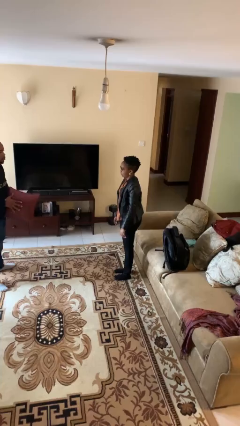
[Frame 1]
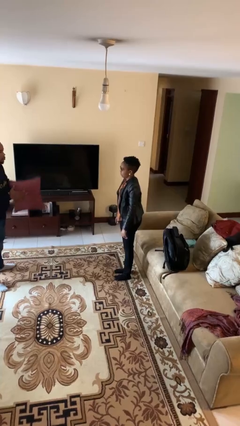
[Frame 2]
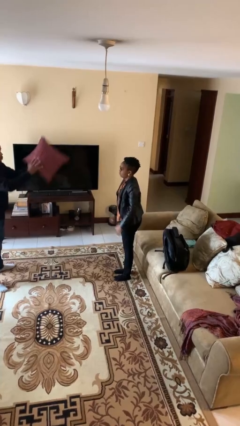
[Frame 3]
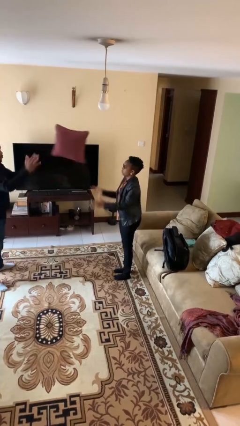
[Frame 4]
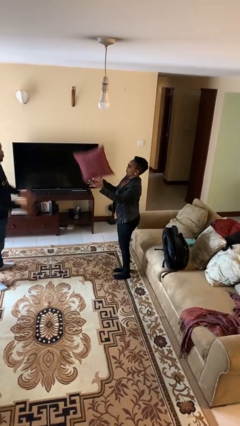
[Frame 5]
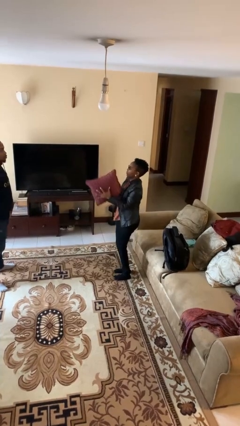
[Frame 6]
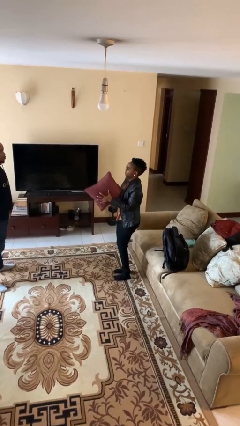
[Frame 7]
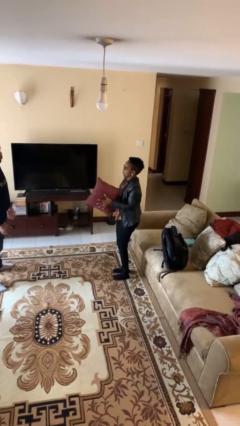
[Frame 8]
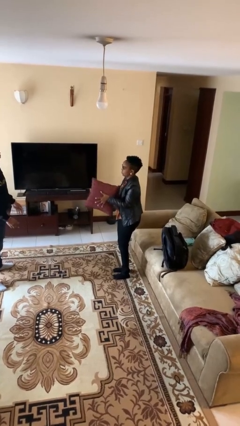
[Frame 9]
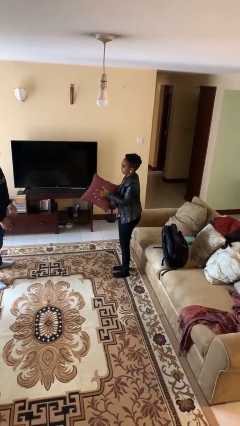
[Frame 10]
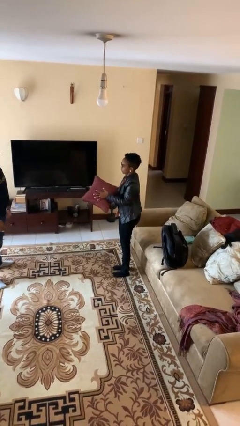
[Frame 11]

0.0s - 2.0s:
person catches object from person

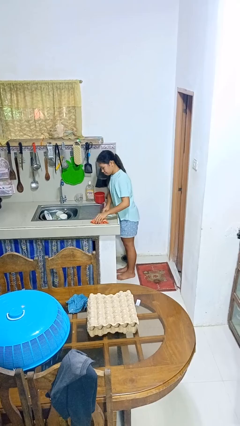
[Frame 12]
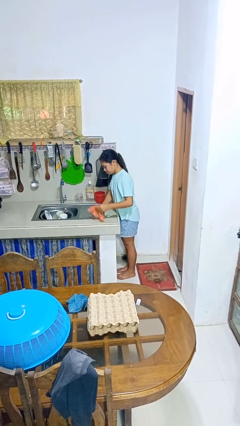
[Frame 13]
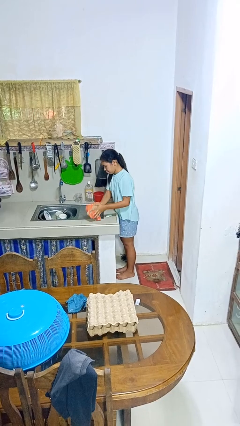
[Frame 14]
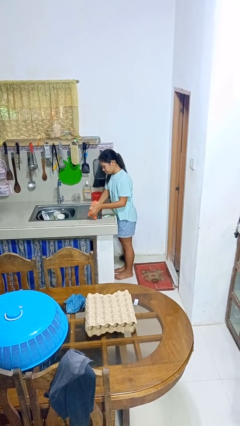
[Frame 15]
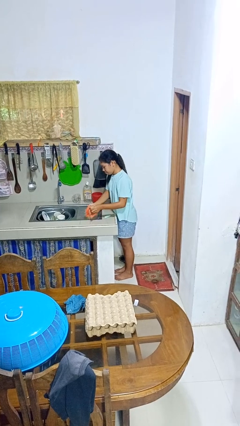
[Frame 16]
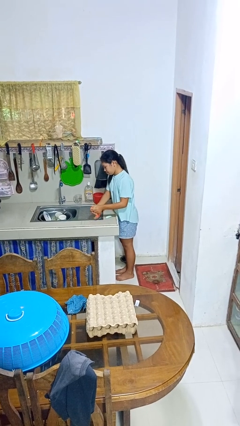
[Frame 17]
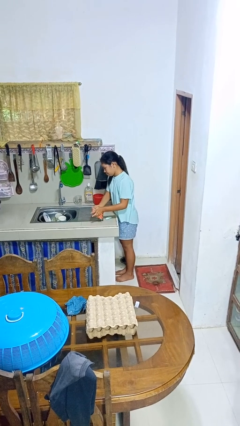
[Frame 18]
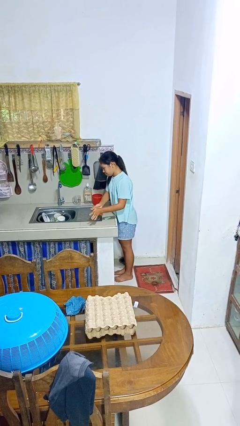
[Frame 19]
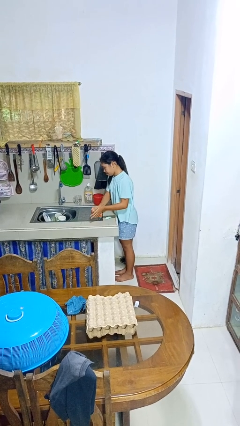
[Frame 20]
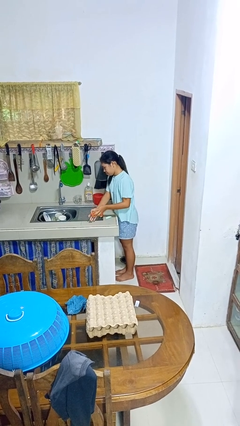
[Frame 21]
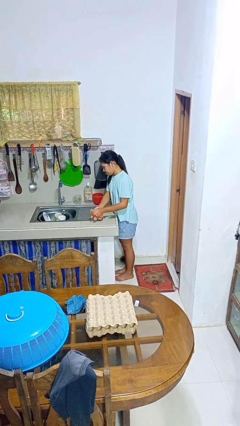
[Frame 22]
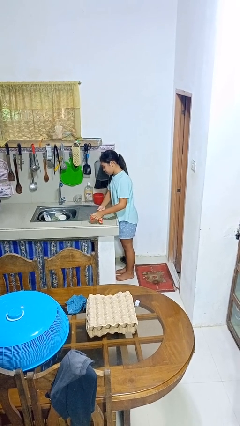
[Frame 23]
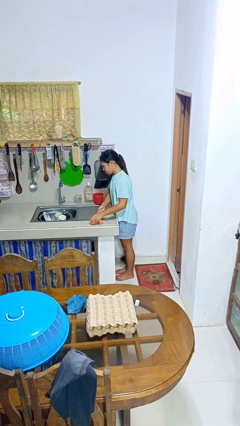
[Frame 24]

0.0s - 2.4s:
person dries hands with towel

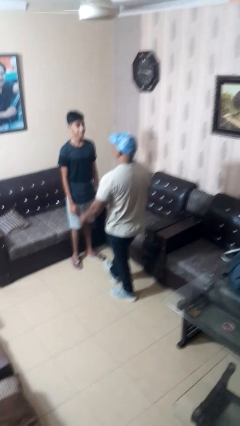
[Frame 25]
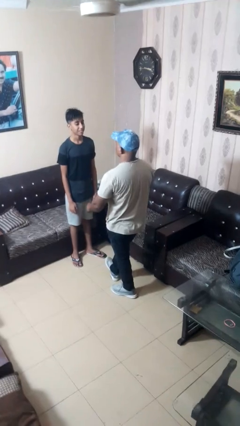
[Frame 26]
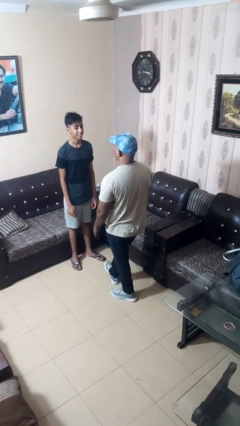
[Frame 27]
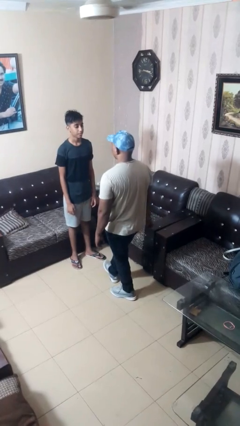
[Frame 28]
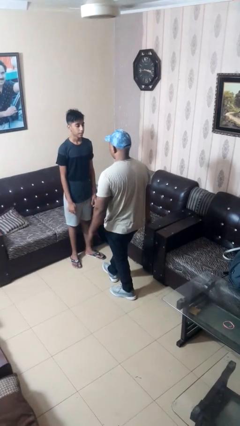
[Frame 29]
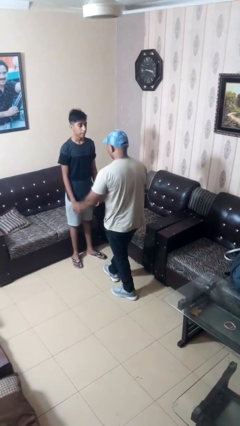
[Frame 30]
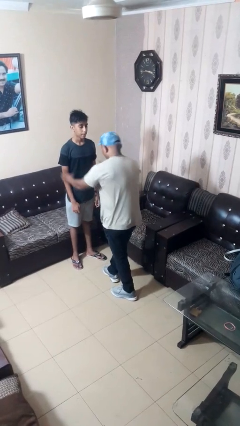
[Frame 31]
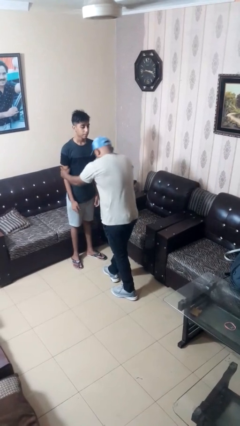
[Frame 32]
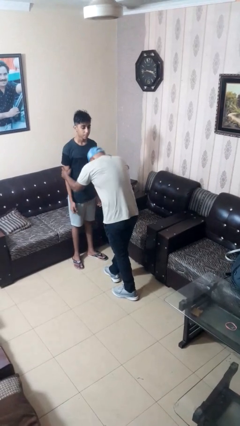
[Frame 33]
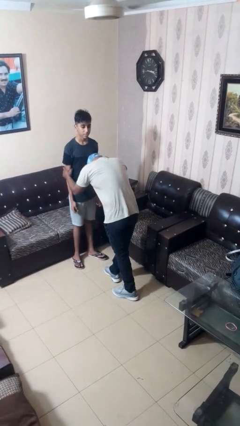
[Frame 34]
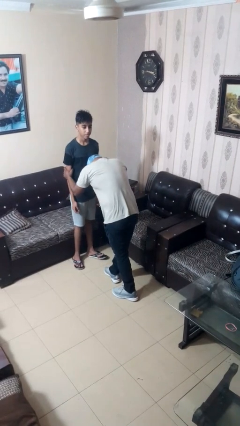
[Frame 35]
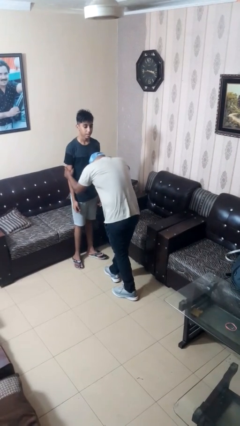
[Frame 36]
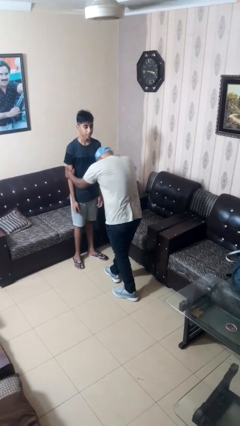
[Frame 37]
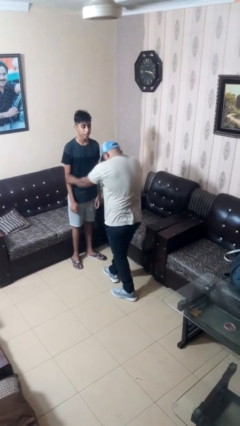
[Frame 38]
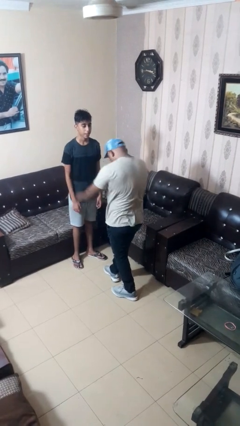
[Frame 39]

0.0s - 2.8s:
person grabs person by bicep

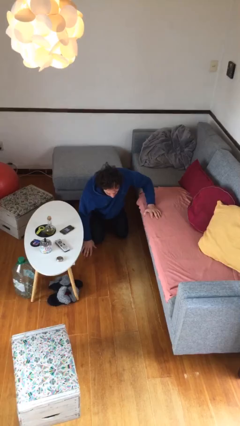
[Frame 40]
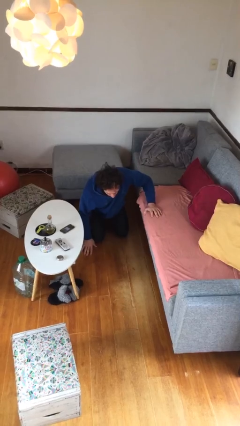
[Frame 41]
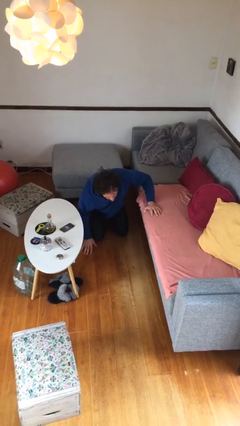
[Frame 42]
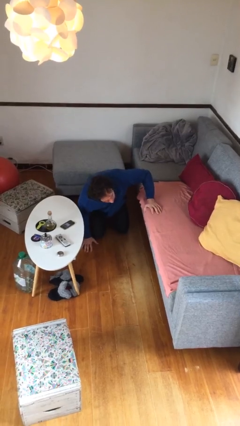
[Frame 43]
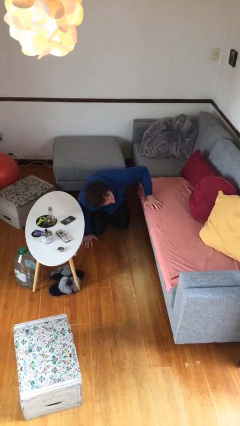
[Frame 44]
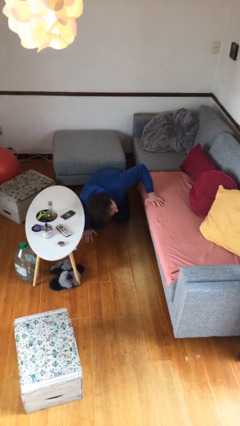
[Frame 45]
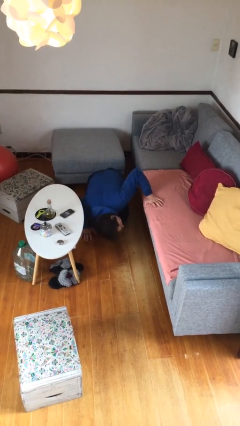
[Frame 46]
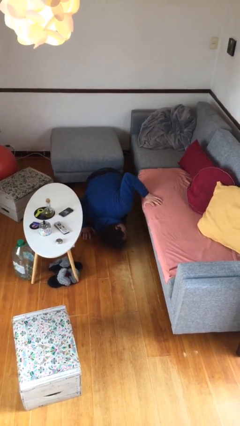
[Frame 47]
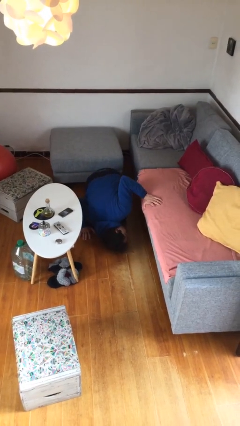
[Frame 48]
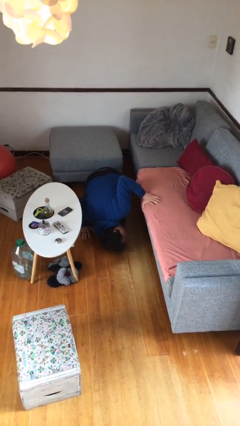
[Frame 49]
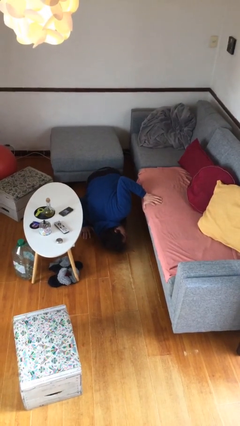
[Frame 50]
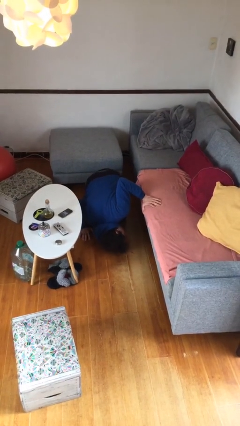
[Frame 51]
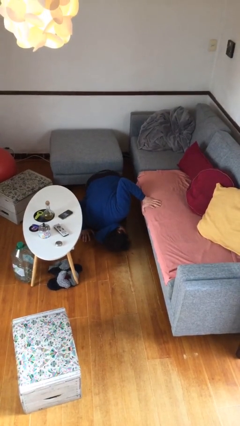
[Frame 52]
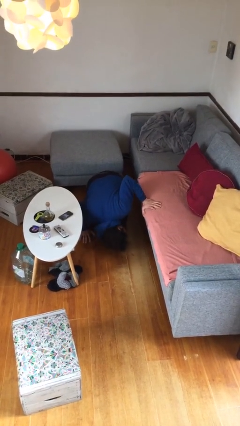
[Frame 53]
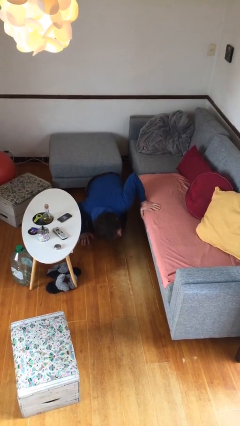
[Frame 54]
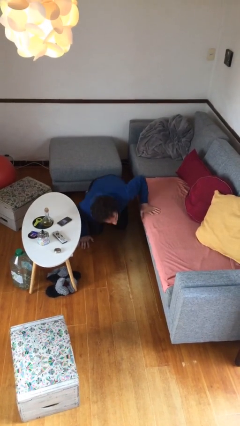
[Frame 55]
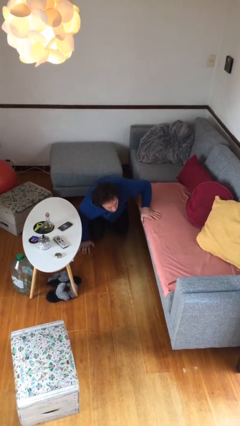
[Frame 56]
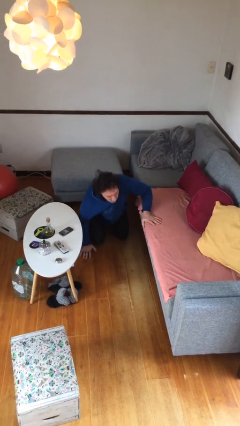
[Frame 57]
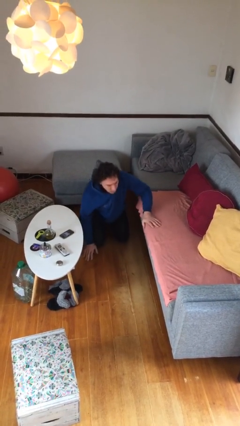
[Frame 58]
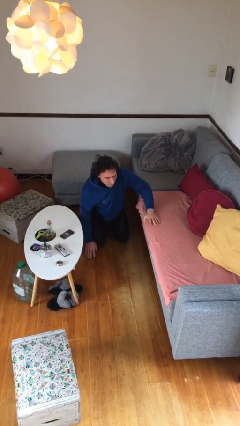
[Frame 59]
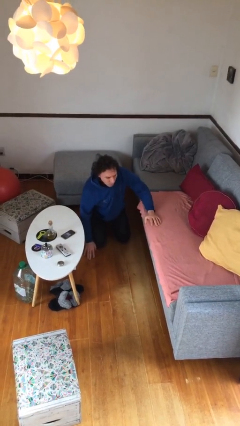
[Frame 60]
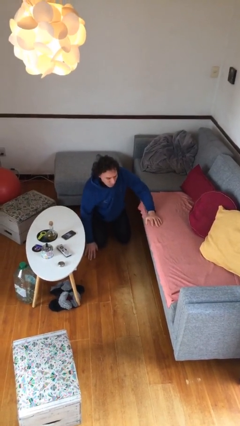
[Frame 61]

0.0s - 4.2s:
person searches under couch

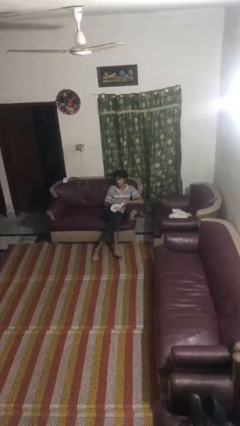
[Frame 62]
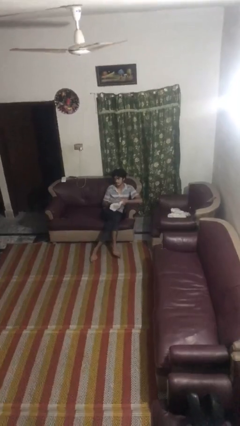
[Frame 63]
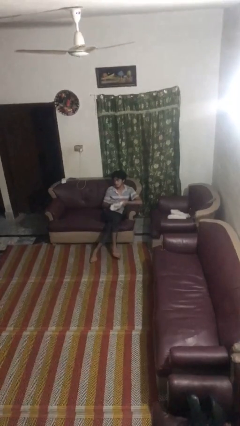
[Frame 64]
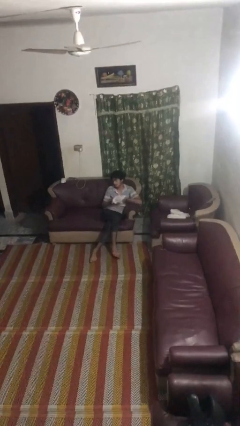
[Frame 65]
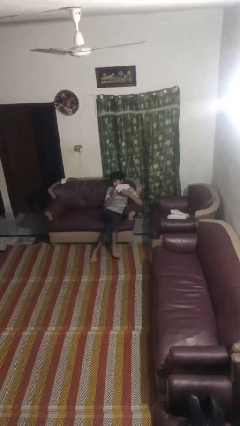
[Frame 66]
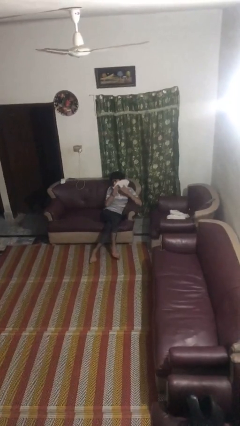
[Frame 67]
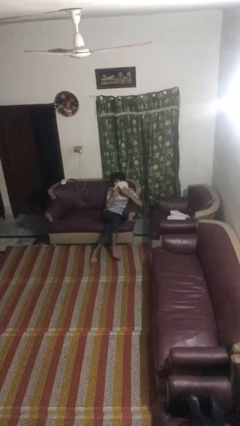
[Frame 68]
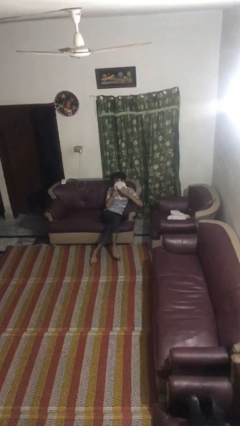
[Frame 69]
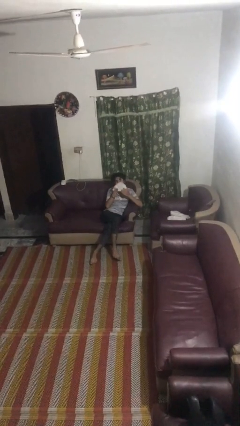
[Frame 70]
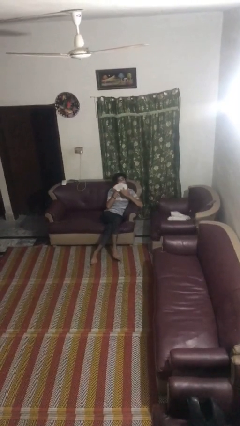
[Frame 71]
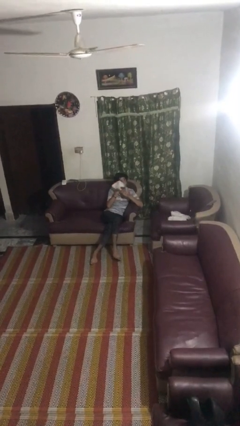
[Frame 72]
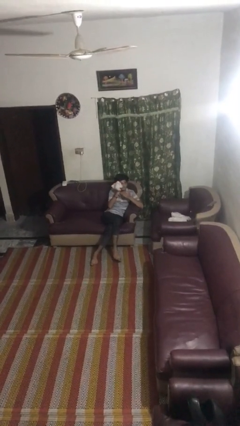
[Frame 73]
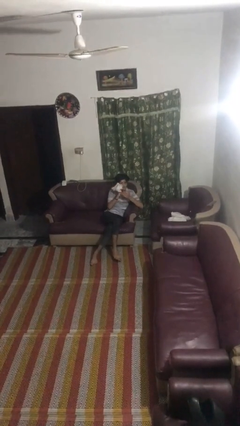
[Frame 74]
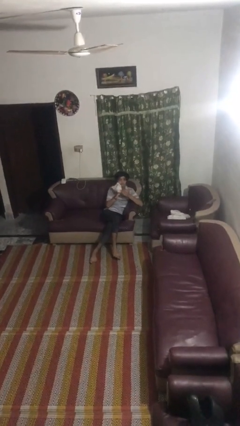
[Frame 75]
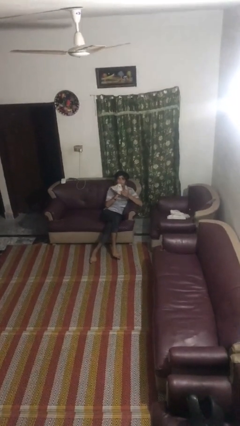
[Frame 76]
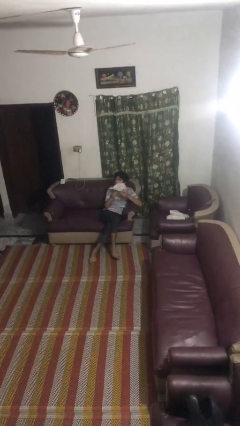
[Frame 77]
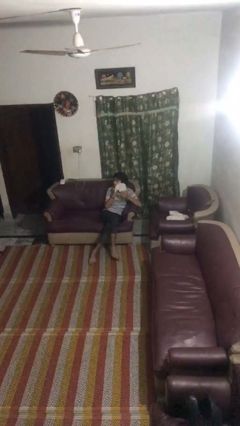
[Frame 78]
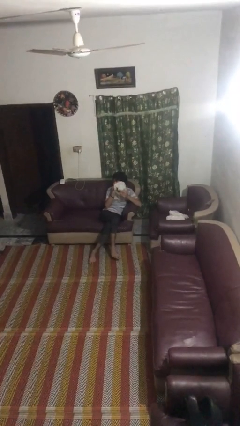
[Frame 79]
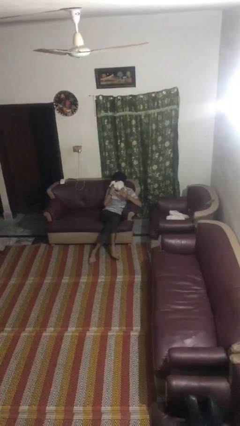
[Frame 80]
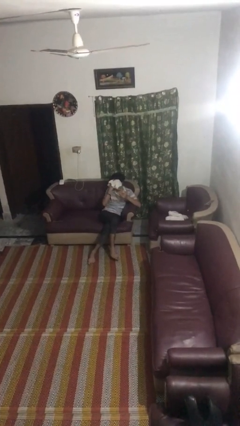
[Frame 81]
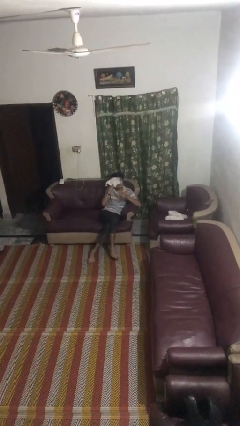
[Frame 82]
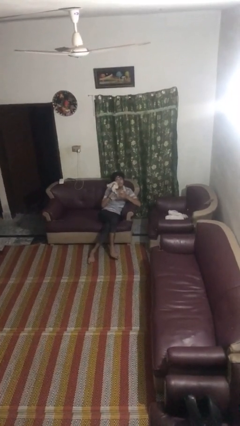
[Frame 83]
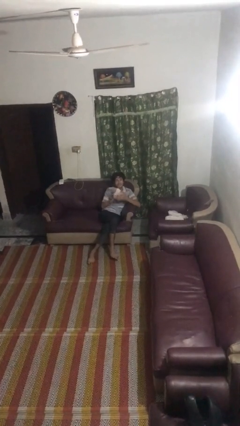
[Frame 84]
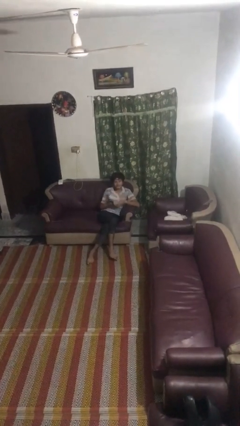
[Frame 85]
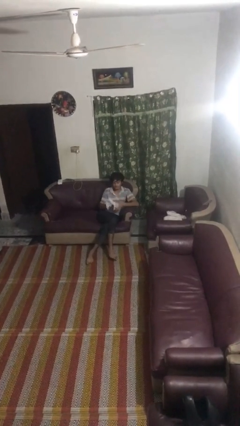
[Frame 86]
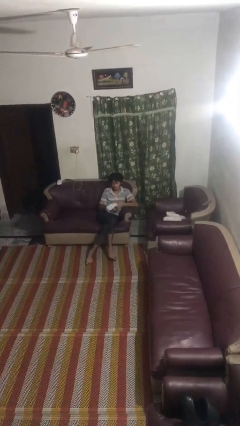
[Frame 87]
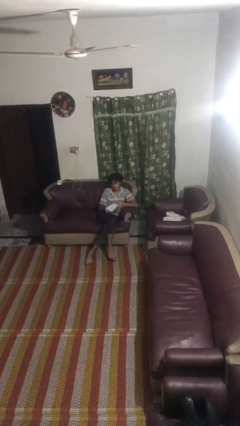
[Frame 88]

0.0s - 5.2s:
person wipes mouth with napkin

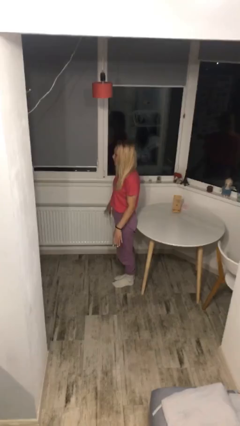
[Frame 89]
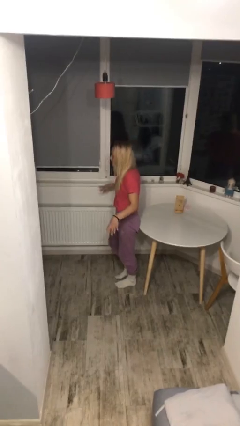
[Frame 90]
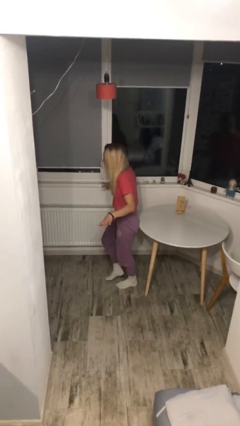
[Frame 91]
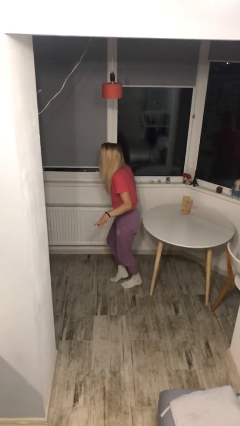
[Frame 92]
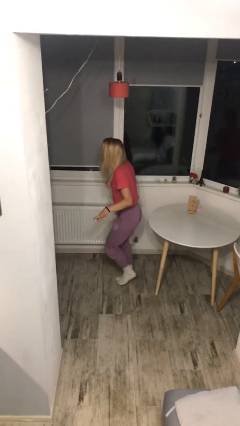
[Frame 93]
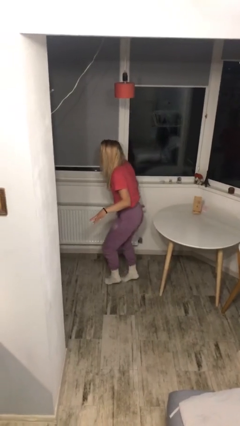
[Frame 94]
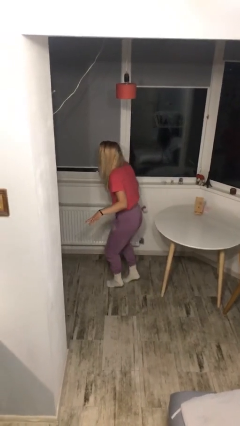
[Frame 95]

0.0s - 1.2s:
person walks tiptoe
